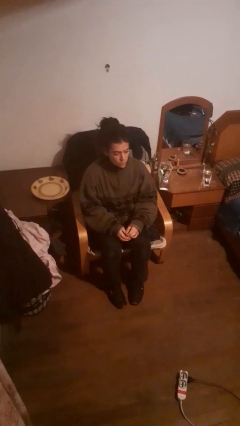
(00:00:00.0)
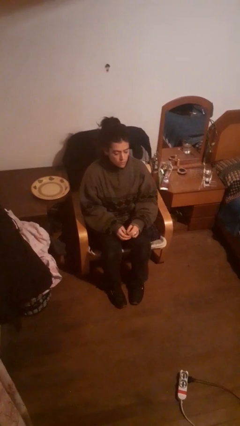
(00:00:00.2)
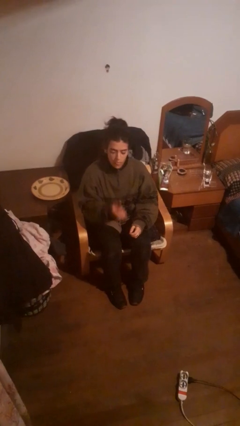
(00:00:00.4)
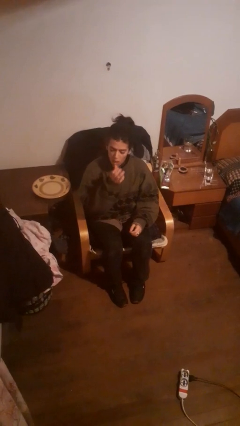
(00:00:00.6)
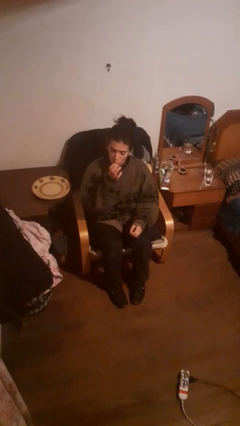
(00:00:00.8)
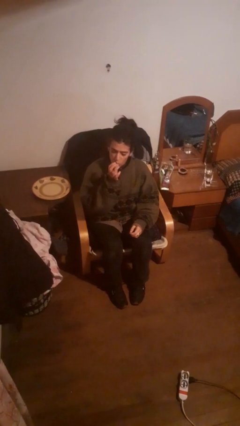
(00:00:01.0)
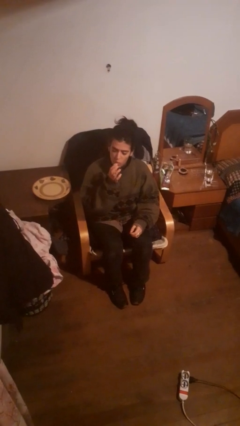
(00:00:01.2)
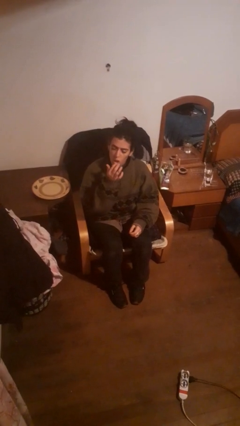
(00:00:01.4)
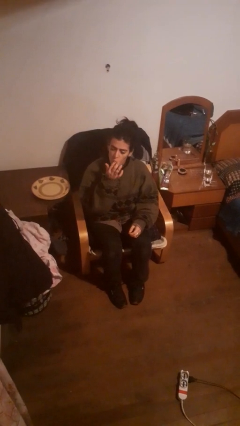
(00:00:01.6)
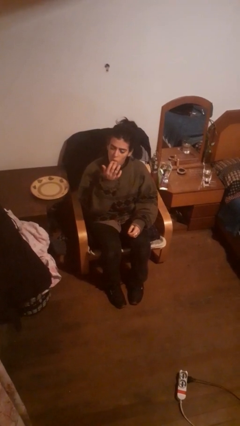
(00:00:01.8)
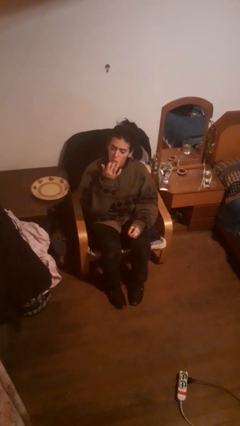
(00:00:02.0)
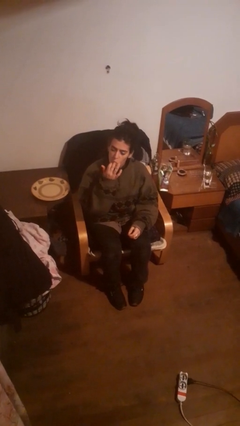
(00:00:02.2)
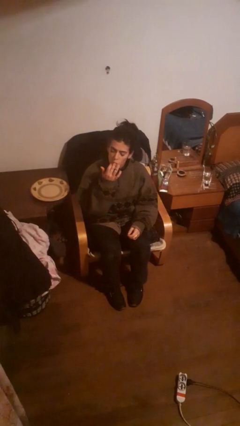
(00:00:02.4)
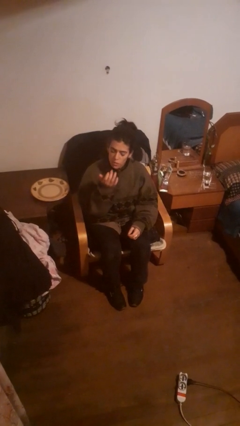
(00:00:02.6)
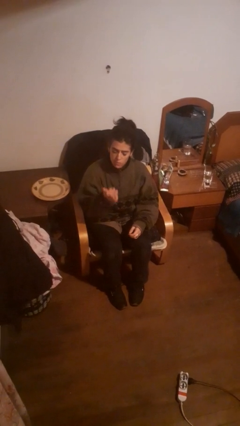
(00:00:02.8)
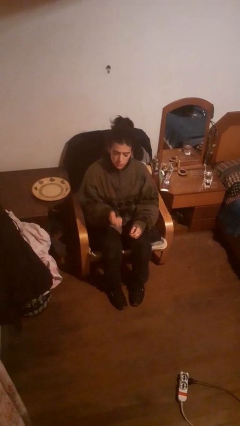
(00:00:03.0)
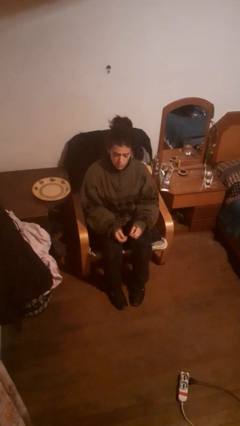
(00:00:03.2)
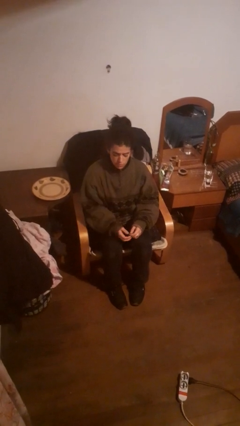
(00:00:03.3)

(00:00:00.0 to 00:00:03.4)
person licks fingers

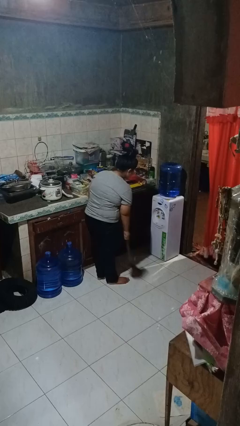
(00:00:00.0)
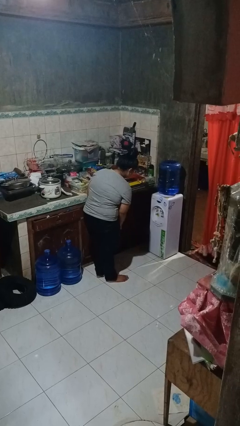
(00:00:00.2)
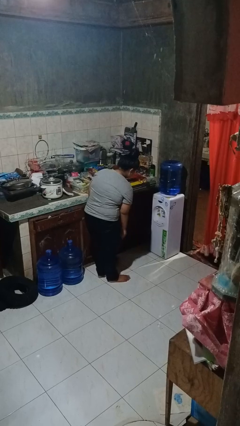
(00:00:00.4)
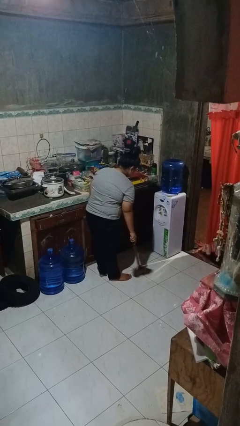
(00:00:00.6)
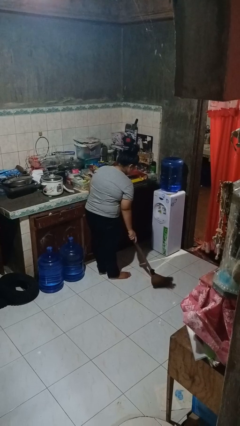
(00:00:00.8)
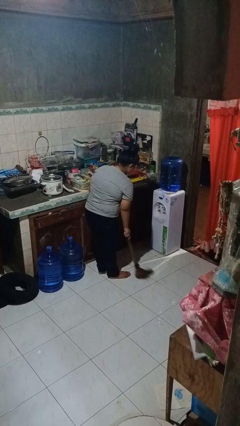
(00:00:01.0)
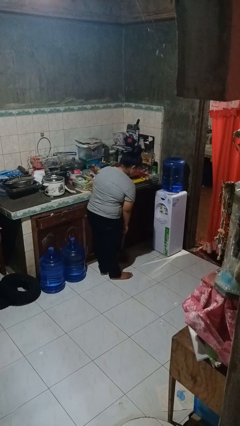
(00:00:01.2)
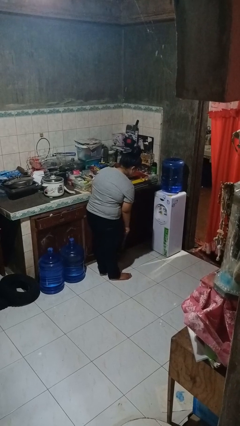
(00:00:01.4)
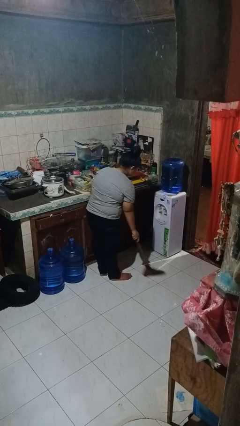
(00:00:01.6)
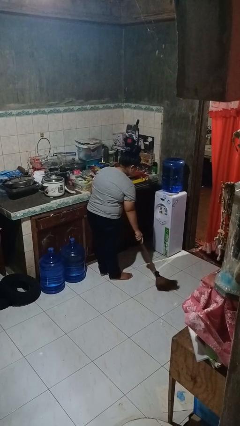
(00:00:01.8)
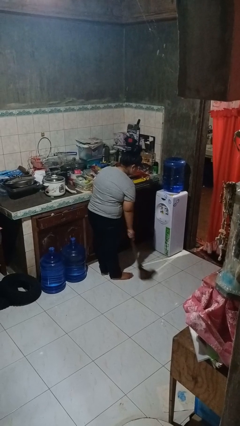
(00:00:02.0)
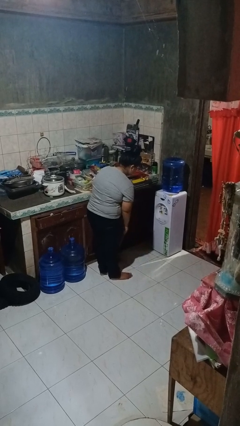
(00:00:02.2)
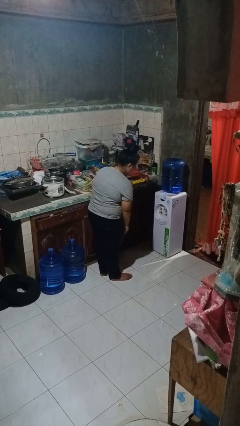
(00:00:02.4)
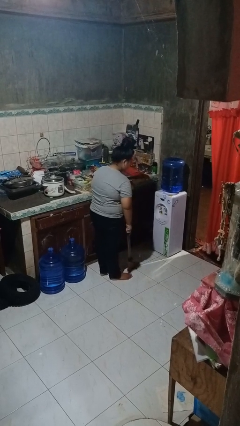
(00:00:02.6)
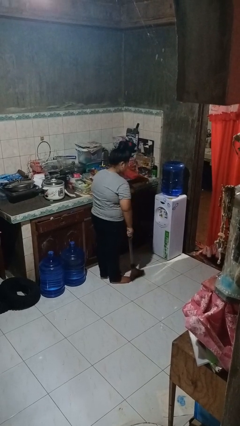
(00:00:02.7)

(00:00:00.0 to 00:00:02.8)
person sweeps floor

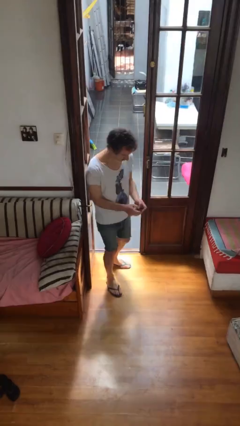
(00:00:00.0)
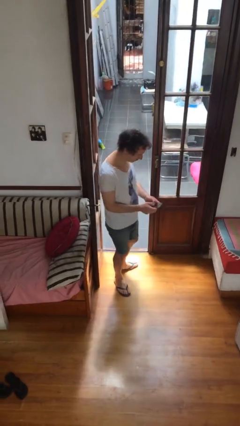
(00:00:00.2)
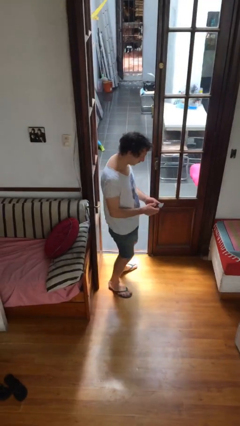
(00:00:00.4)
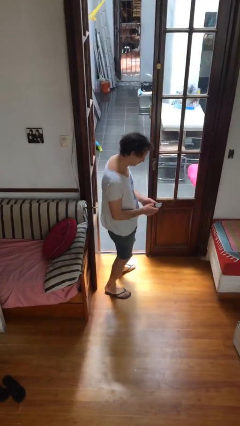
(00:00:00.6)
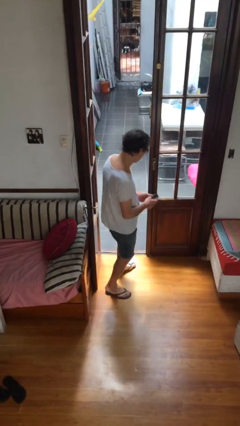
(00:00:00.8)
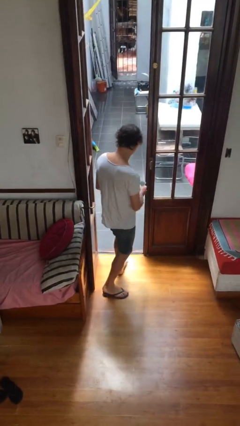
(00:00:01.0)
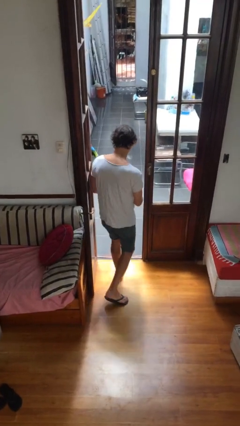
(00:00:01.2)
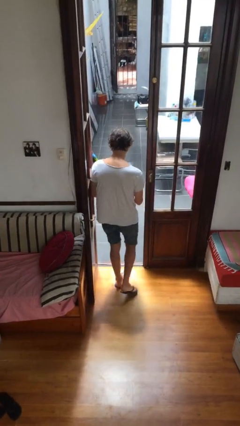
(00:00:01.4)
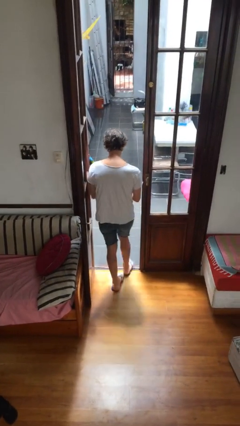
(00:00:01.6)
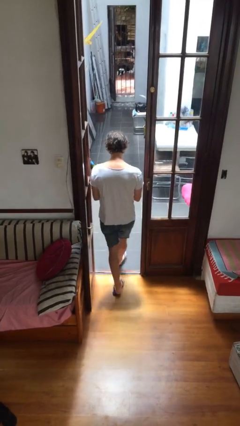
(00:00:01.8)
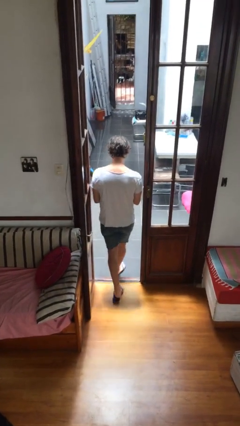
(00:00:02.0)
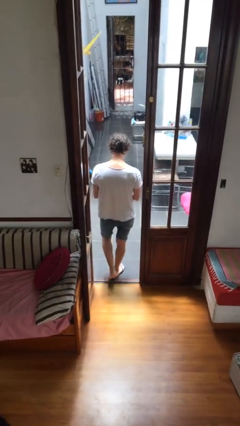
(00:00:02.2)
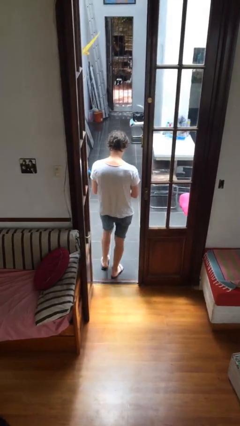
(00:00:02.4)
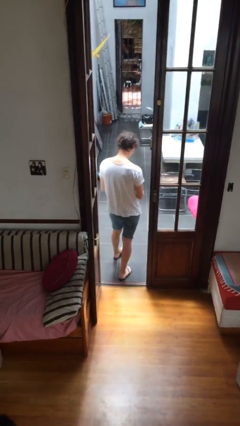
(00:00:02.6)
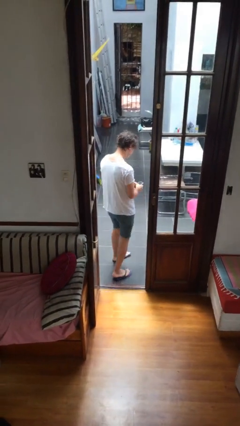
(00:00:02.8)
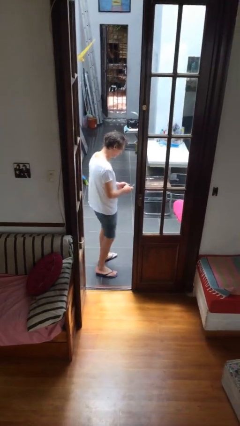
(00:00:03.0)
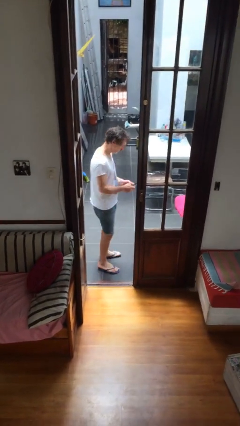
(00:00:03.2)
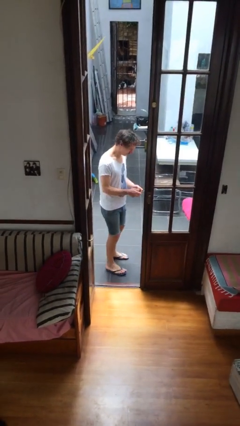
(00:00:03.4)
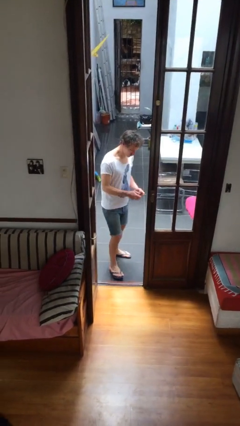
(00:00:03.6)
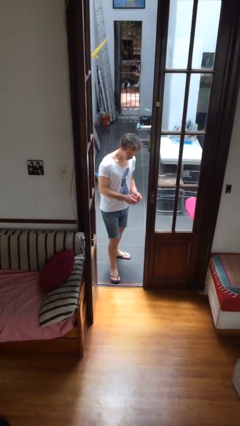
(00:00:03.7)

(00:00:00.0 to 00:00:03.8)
person exits scene through structure

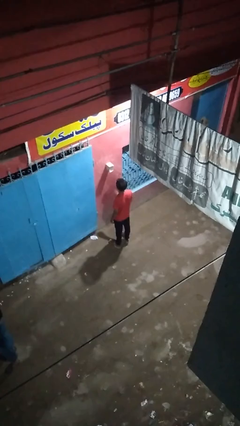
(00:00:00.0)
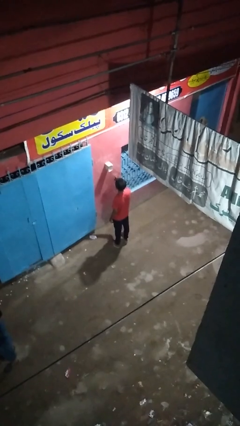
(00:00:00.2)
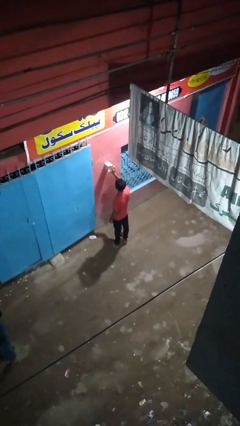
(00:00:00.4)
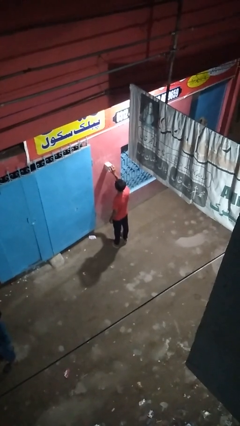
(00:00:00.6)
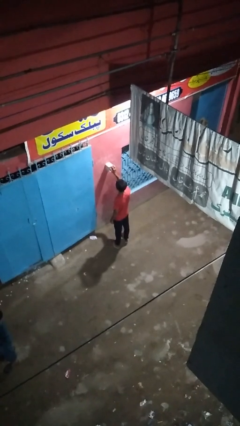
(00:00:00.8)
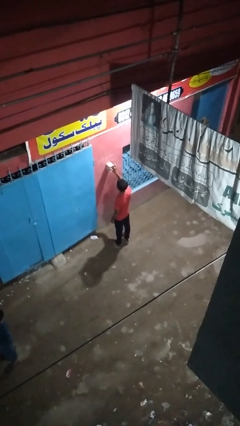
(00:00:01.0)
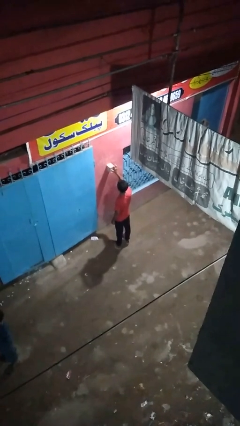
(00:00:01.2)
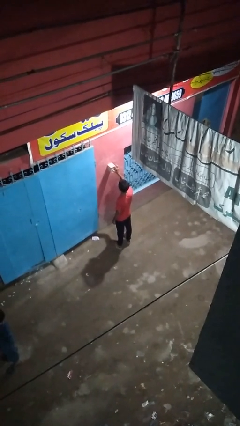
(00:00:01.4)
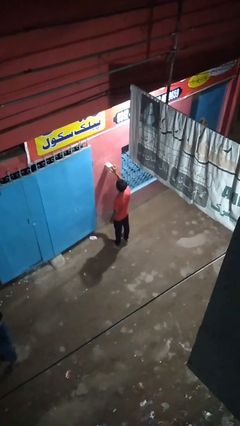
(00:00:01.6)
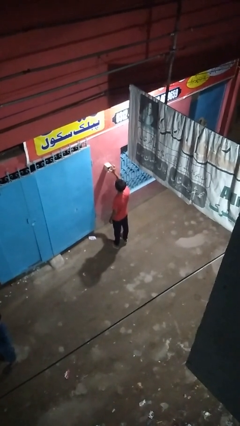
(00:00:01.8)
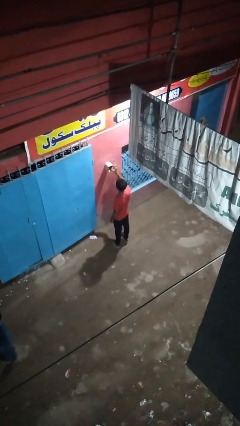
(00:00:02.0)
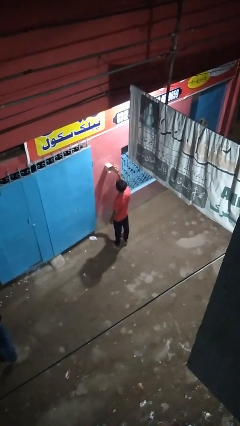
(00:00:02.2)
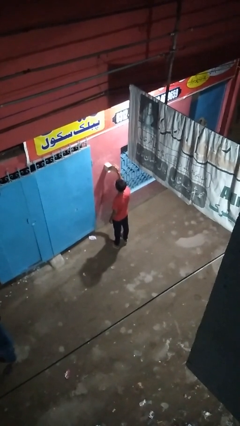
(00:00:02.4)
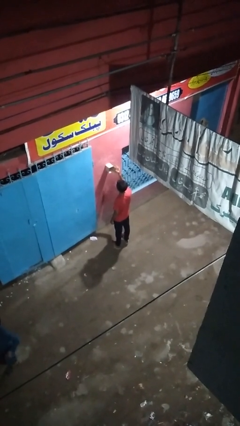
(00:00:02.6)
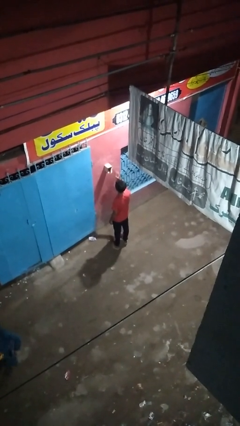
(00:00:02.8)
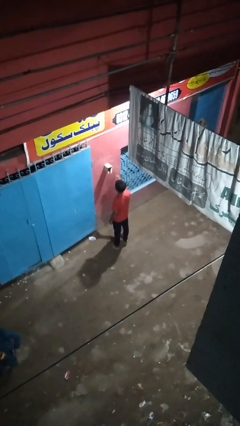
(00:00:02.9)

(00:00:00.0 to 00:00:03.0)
person opens mailbox

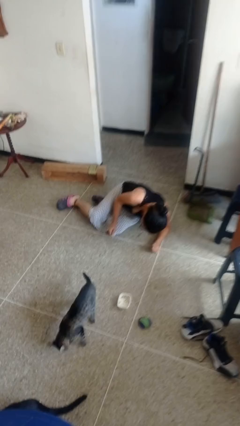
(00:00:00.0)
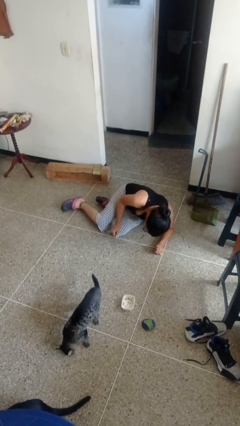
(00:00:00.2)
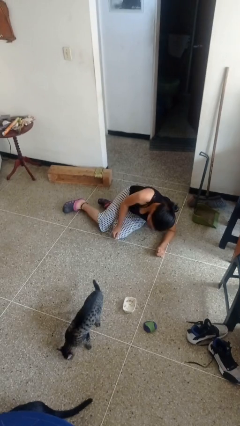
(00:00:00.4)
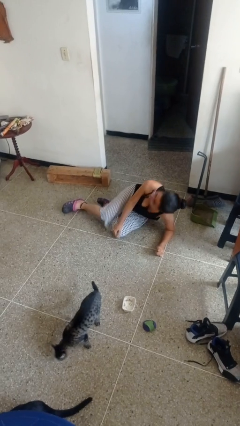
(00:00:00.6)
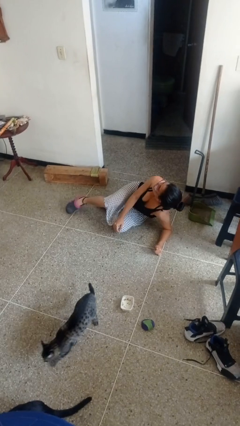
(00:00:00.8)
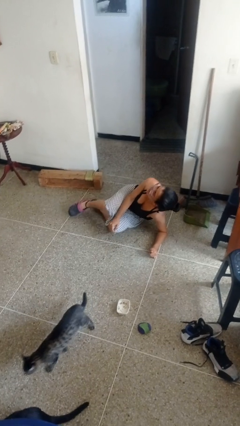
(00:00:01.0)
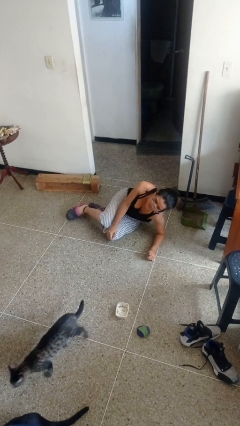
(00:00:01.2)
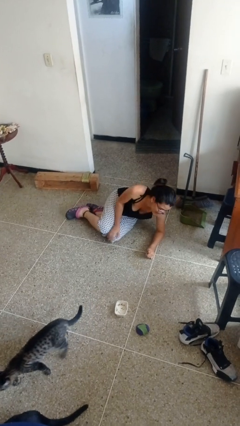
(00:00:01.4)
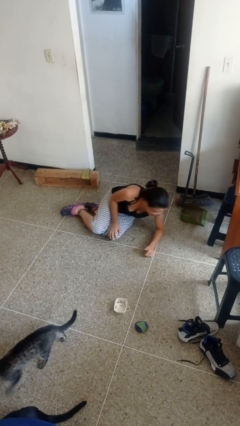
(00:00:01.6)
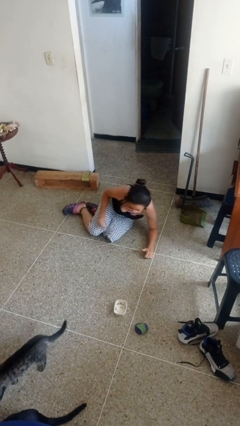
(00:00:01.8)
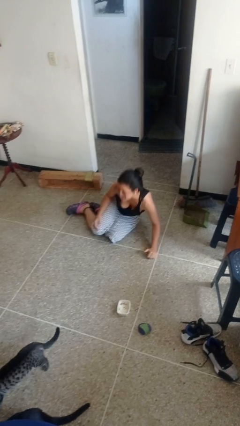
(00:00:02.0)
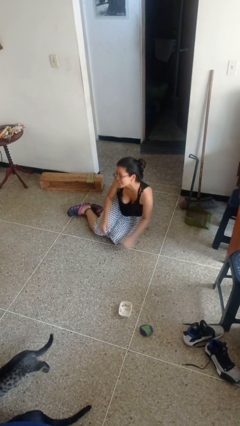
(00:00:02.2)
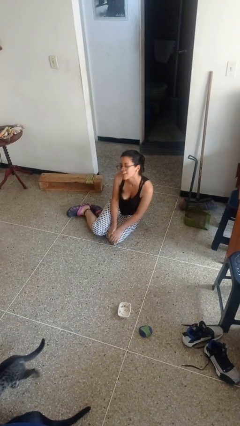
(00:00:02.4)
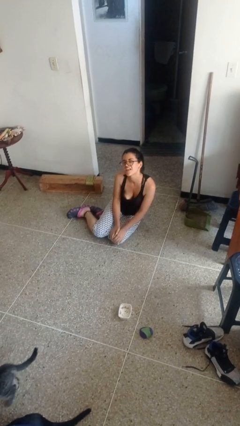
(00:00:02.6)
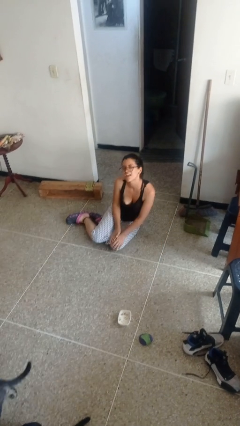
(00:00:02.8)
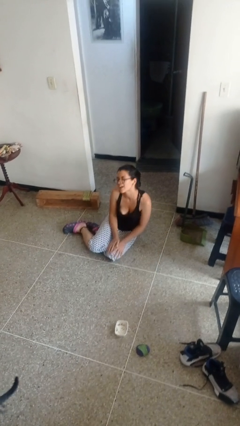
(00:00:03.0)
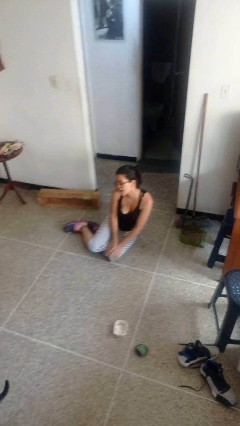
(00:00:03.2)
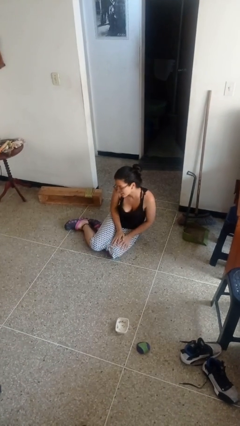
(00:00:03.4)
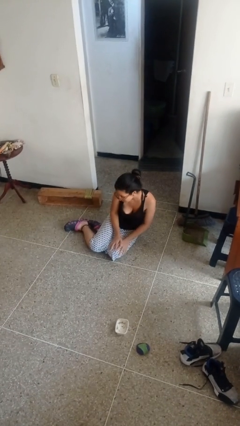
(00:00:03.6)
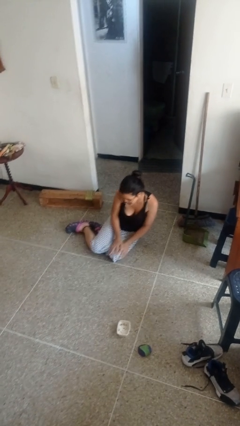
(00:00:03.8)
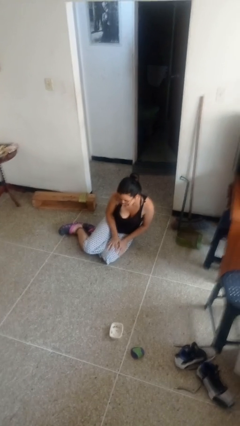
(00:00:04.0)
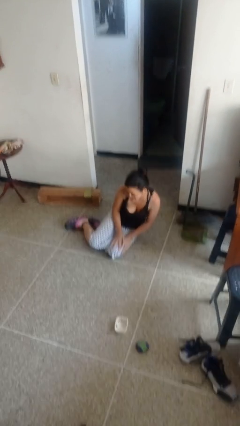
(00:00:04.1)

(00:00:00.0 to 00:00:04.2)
person lies down on floor
